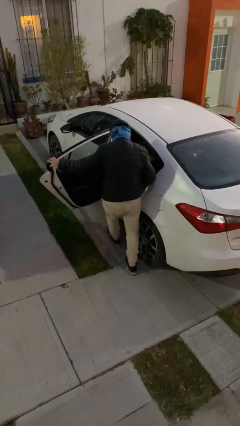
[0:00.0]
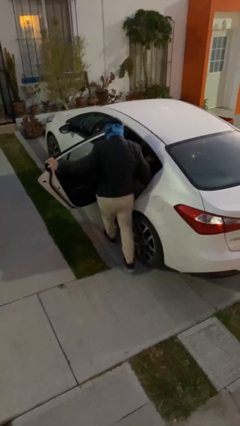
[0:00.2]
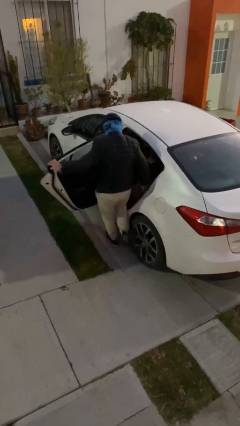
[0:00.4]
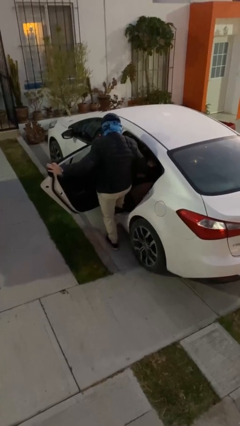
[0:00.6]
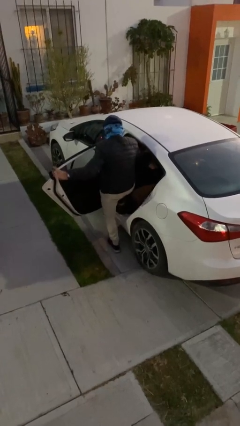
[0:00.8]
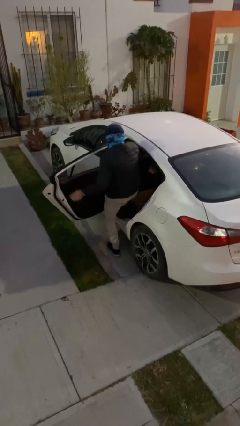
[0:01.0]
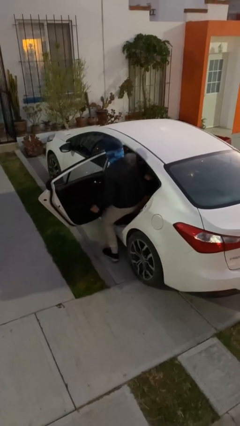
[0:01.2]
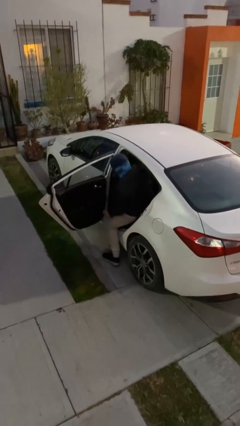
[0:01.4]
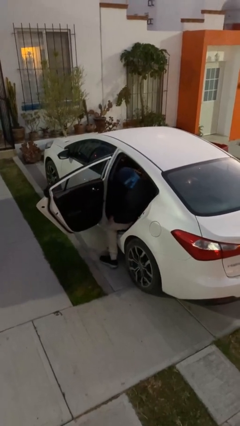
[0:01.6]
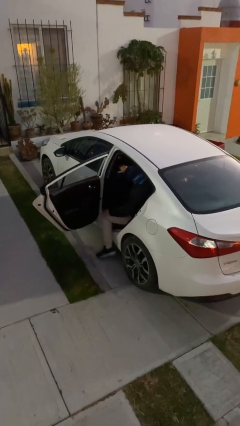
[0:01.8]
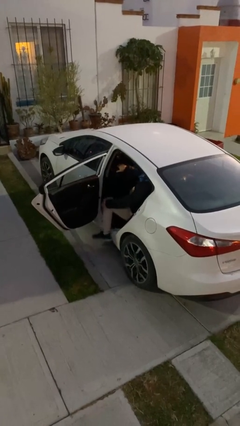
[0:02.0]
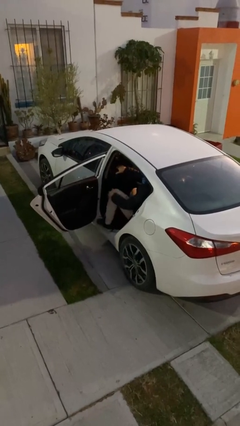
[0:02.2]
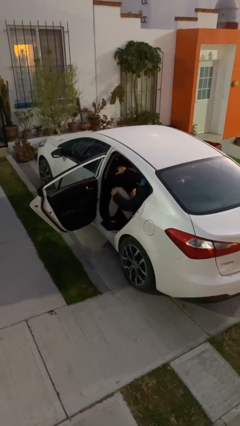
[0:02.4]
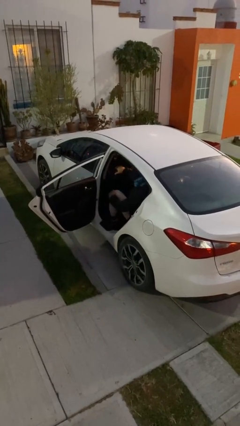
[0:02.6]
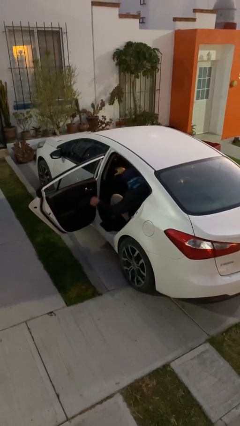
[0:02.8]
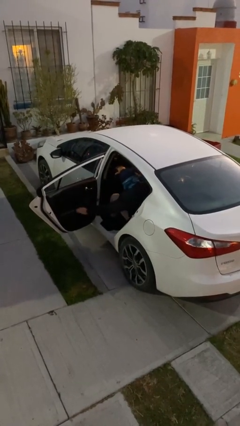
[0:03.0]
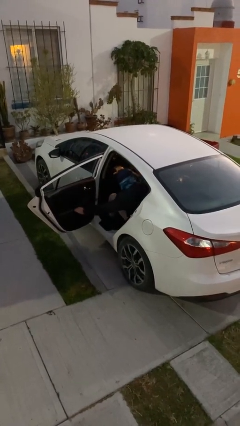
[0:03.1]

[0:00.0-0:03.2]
person enters car

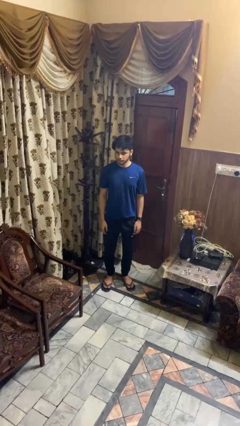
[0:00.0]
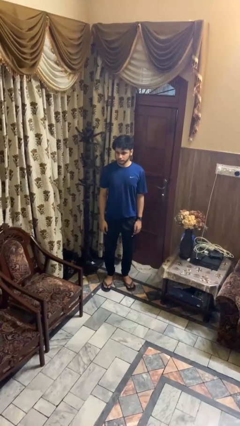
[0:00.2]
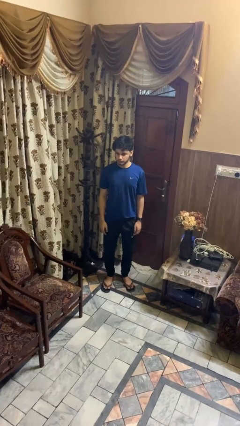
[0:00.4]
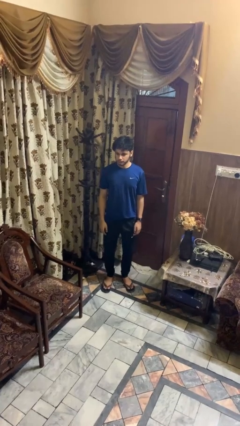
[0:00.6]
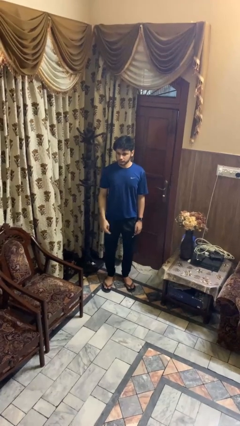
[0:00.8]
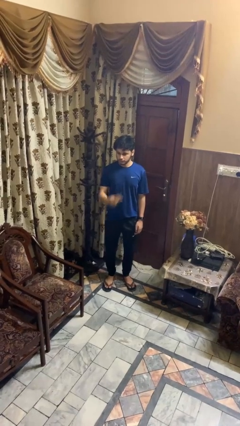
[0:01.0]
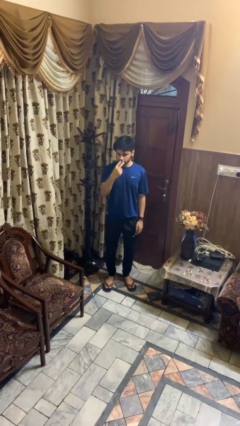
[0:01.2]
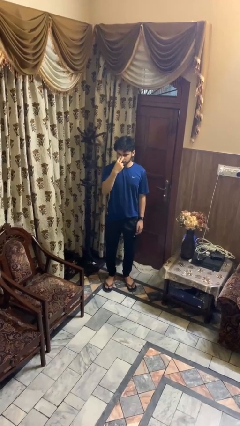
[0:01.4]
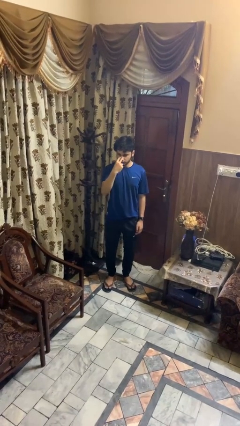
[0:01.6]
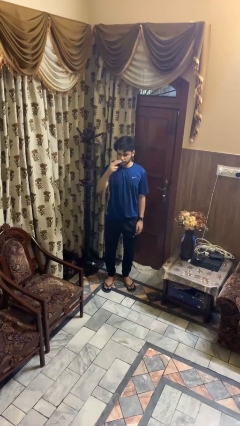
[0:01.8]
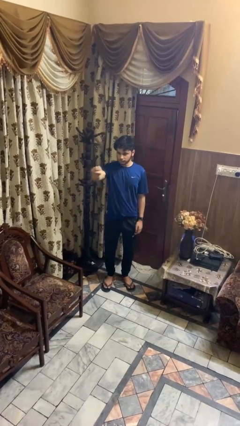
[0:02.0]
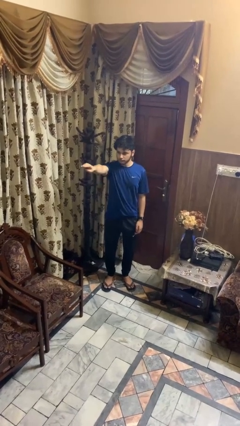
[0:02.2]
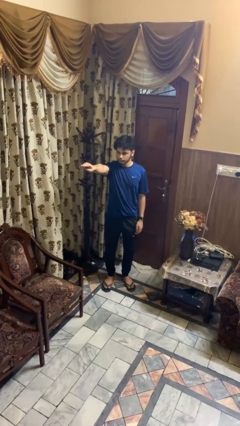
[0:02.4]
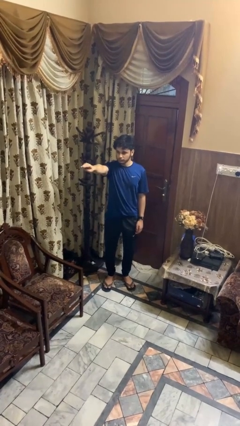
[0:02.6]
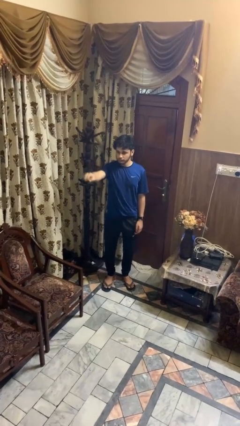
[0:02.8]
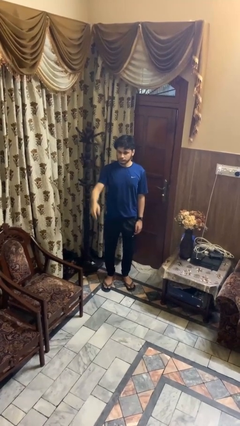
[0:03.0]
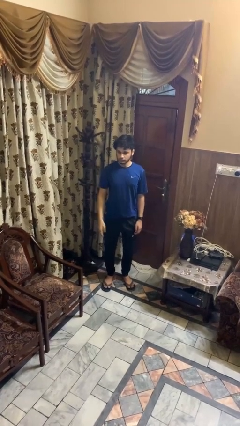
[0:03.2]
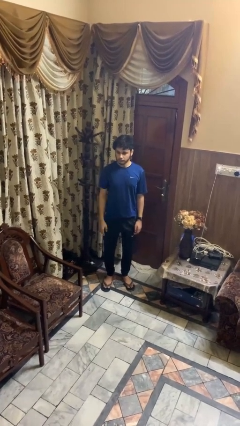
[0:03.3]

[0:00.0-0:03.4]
person gestures watch closely

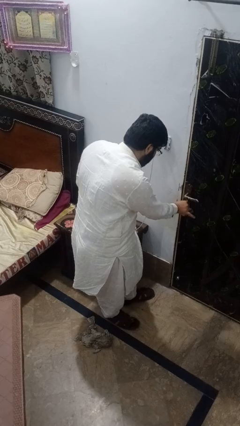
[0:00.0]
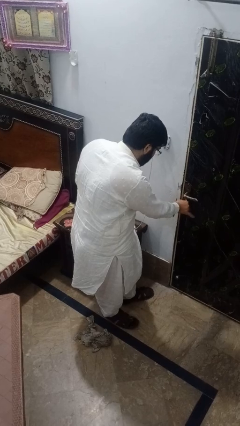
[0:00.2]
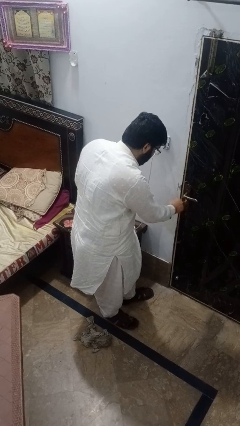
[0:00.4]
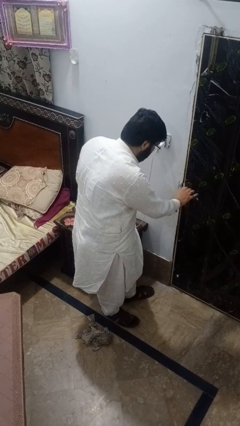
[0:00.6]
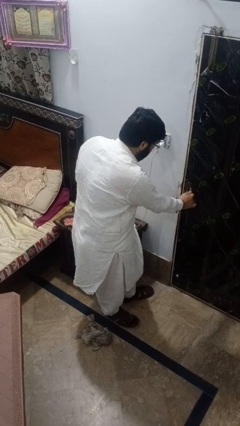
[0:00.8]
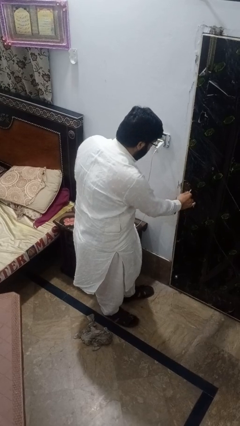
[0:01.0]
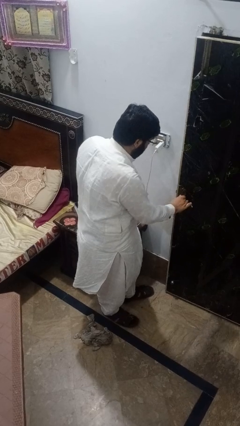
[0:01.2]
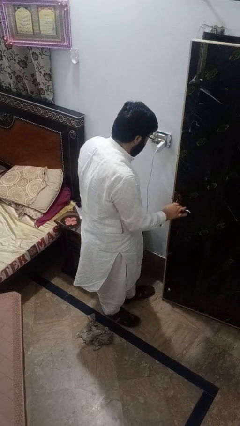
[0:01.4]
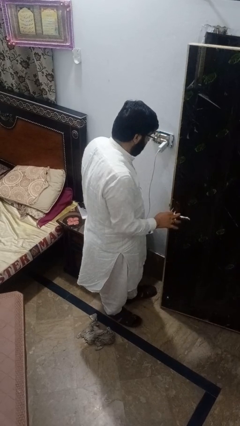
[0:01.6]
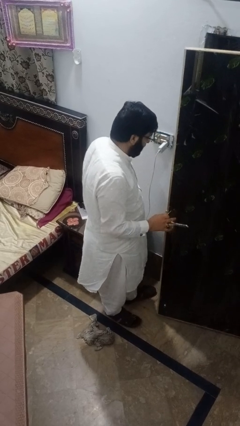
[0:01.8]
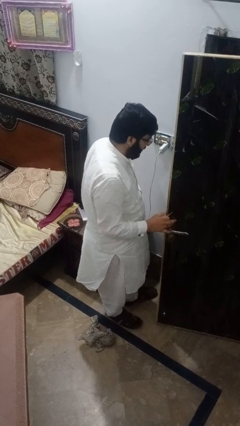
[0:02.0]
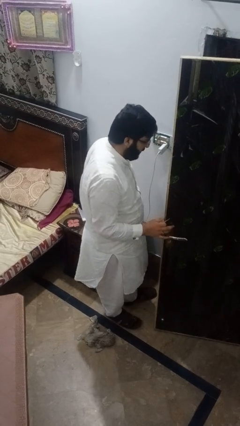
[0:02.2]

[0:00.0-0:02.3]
person opens facility door

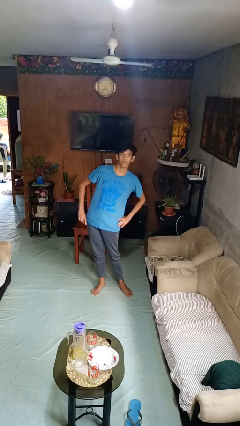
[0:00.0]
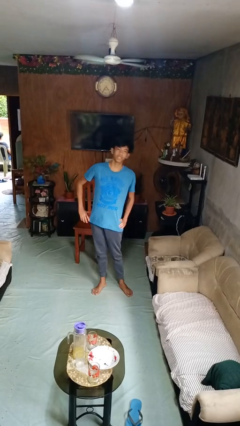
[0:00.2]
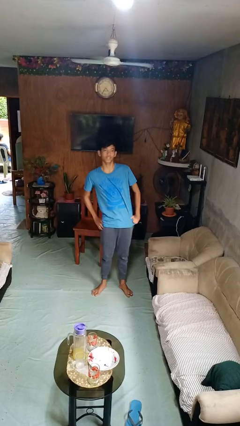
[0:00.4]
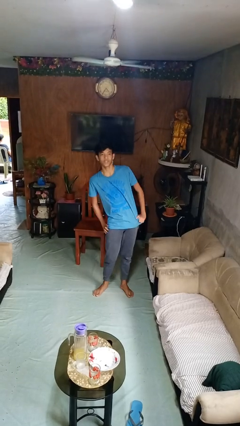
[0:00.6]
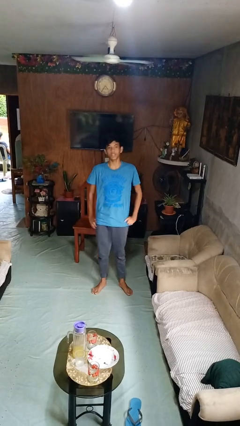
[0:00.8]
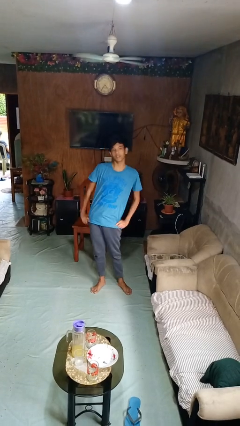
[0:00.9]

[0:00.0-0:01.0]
person dances in place

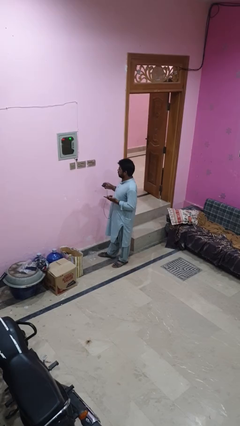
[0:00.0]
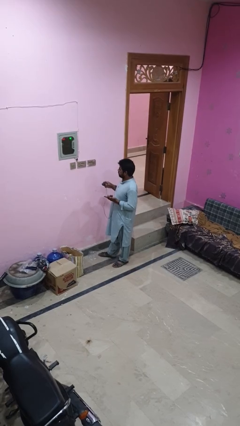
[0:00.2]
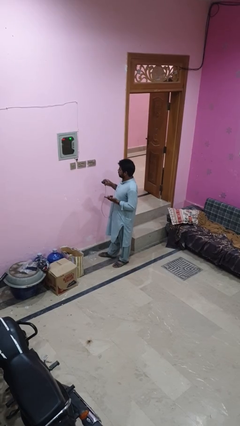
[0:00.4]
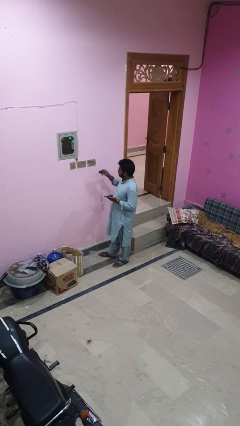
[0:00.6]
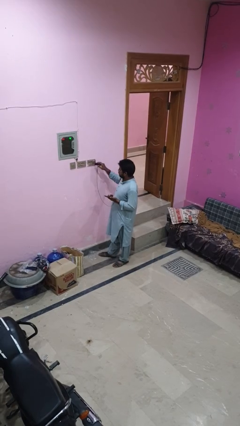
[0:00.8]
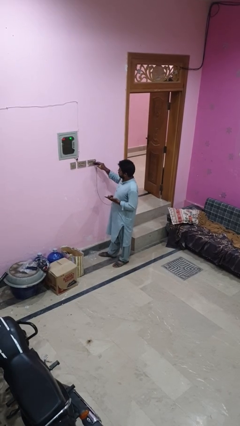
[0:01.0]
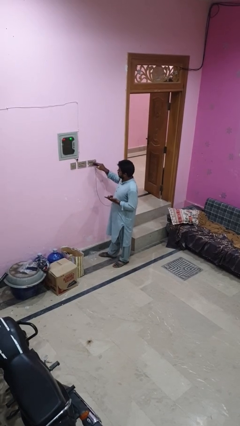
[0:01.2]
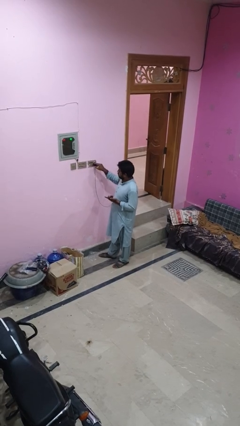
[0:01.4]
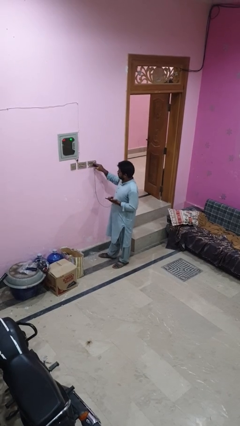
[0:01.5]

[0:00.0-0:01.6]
person plugs into electrical socket

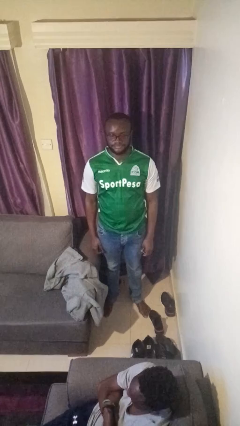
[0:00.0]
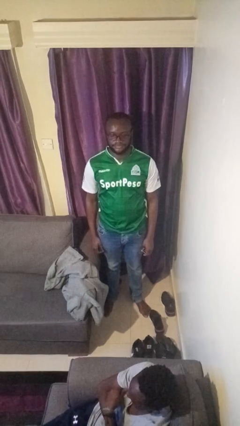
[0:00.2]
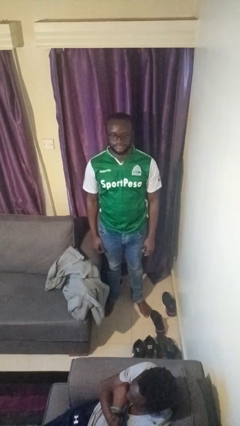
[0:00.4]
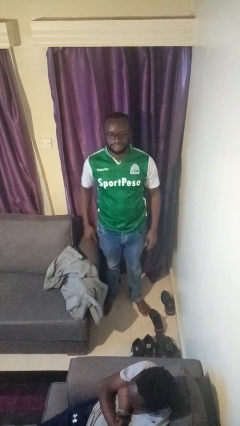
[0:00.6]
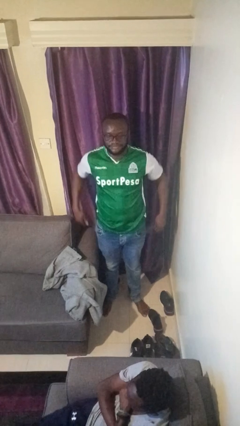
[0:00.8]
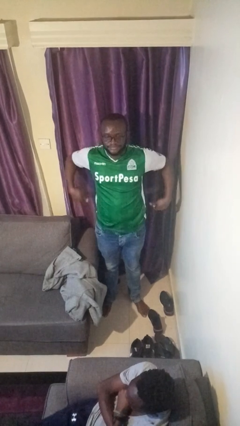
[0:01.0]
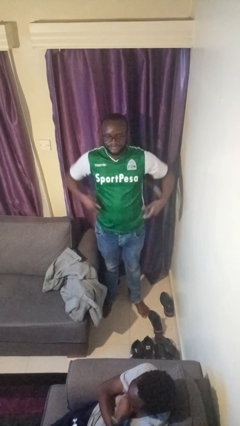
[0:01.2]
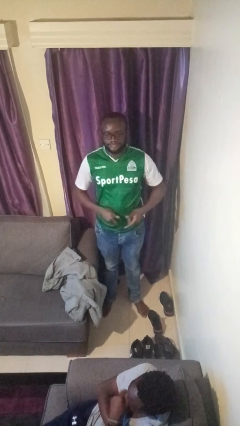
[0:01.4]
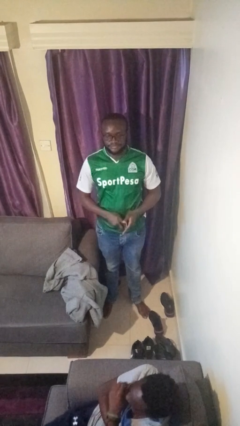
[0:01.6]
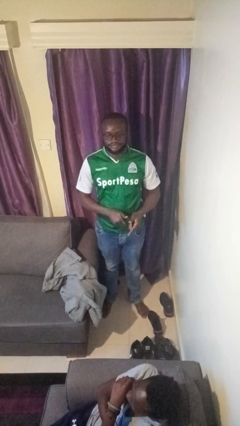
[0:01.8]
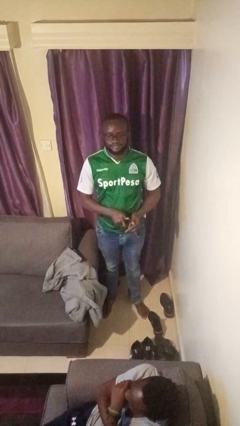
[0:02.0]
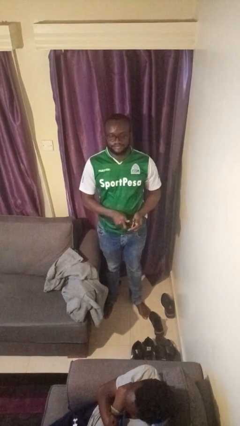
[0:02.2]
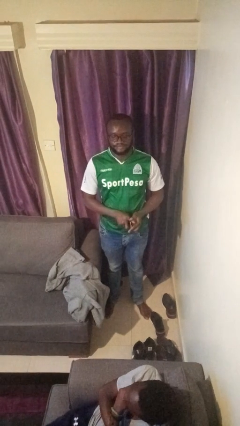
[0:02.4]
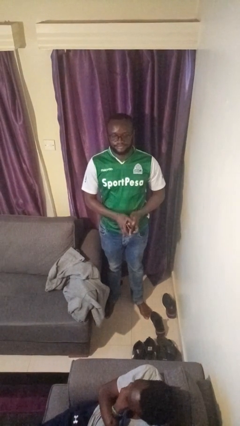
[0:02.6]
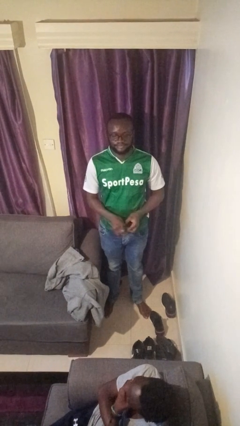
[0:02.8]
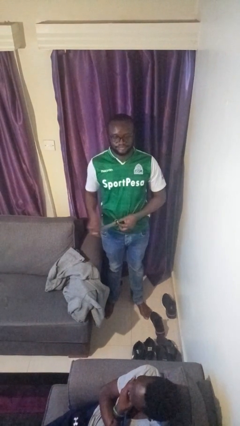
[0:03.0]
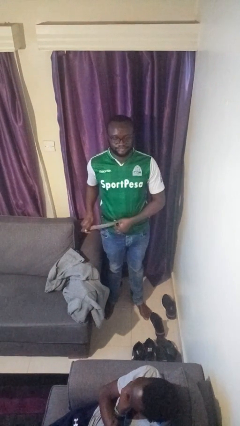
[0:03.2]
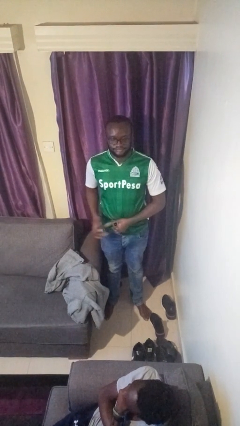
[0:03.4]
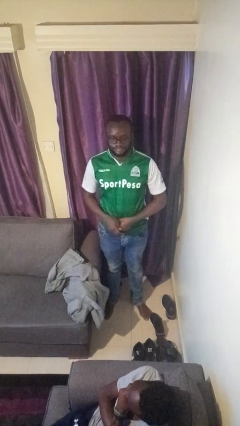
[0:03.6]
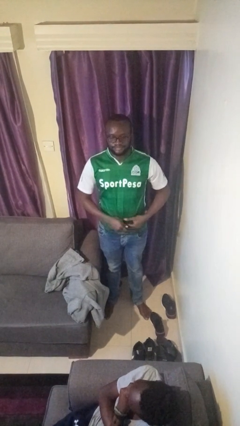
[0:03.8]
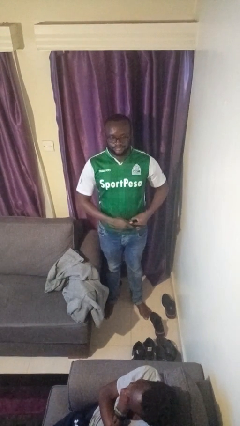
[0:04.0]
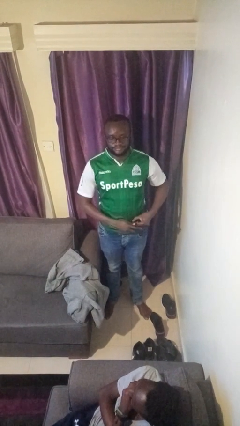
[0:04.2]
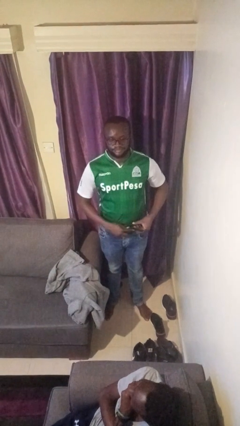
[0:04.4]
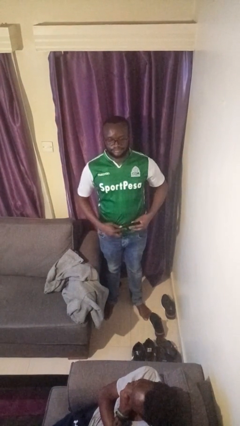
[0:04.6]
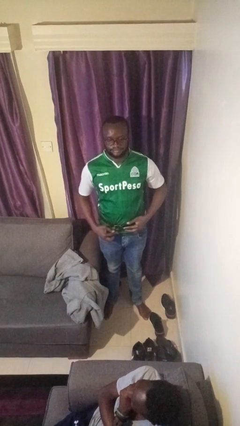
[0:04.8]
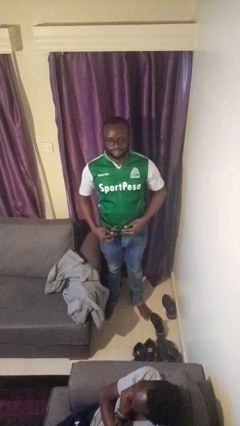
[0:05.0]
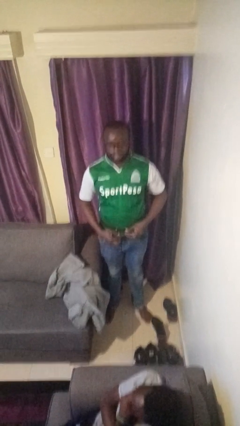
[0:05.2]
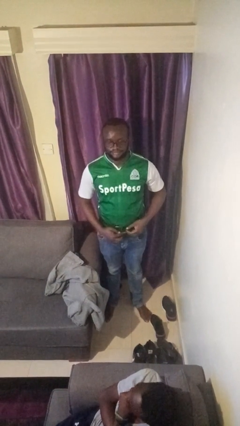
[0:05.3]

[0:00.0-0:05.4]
person puts on belt

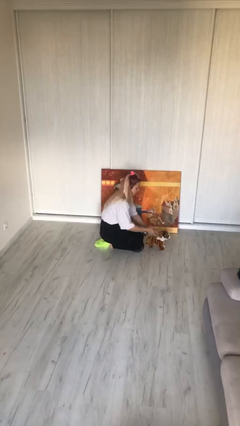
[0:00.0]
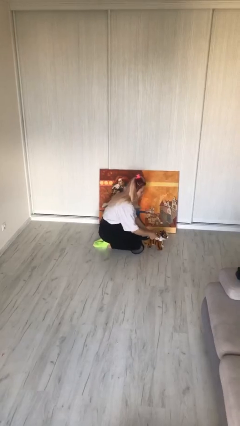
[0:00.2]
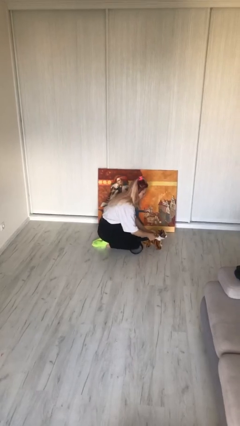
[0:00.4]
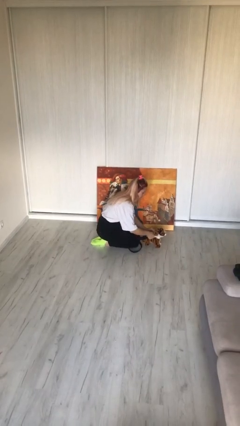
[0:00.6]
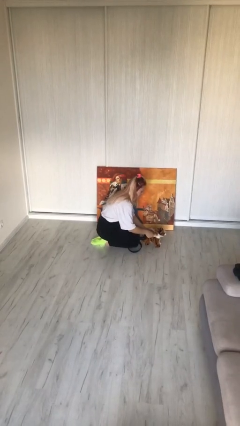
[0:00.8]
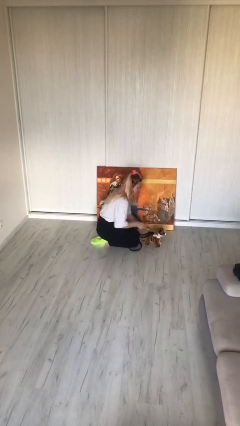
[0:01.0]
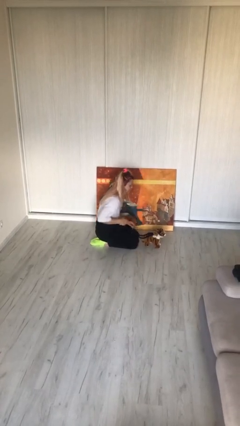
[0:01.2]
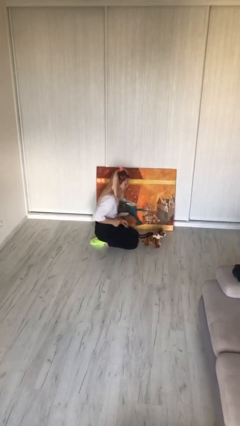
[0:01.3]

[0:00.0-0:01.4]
person attaches leash to dog
